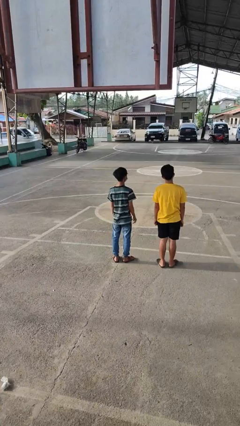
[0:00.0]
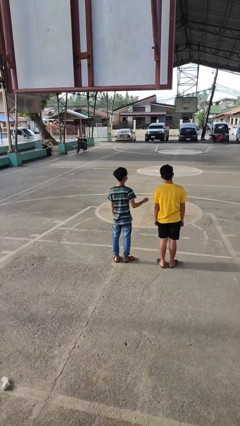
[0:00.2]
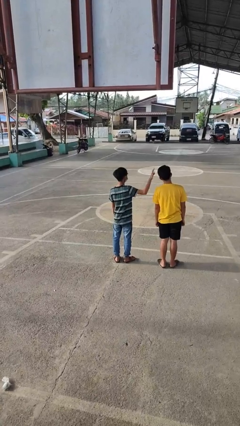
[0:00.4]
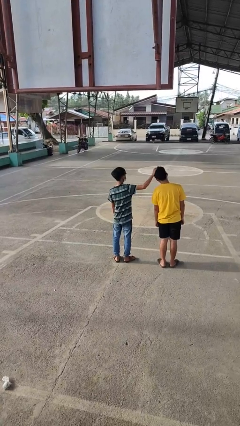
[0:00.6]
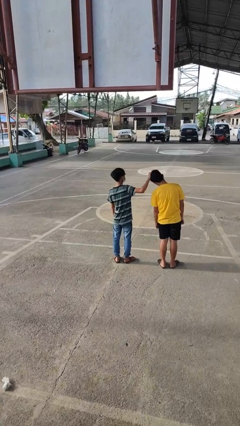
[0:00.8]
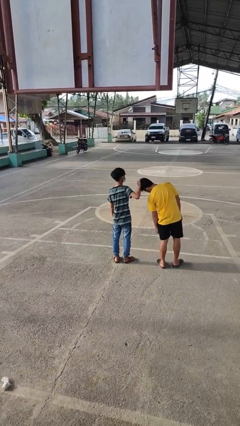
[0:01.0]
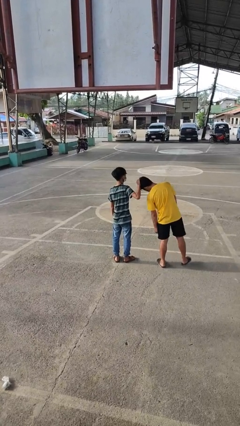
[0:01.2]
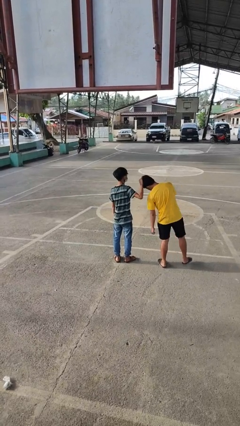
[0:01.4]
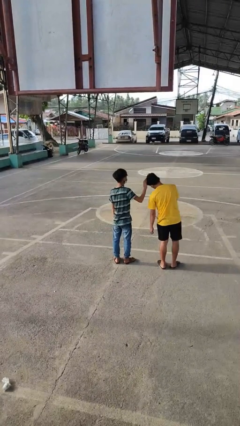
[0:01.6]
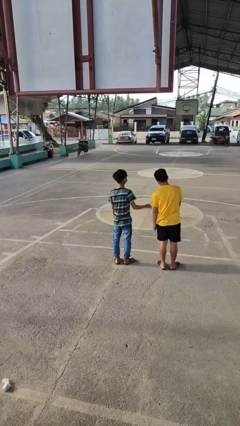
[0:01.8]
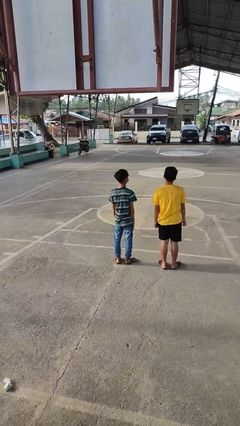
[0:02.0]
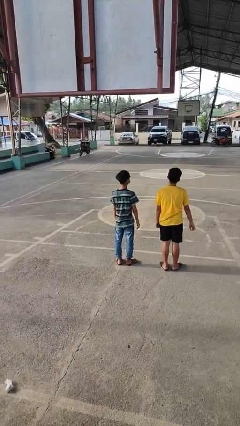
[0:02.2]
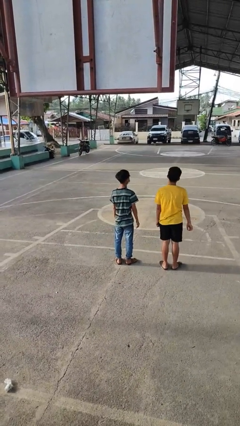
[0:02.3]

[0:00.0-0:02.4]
person grabs person by hair

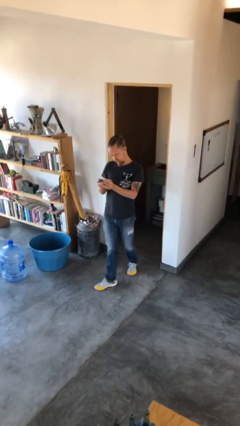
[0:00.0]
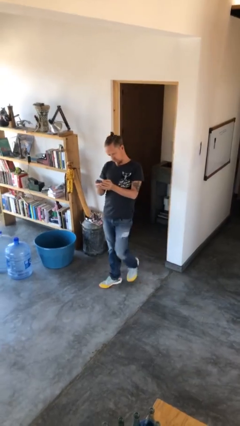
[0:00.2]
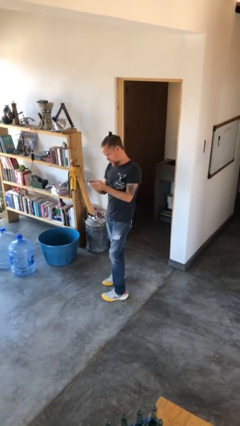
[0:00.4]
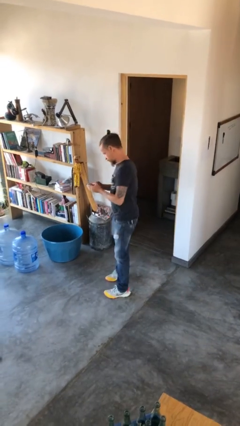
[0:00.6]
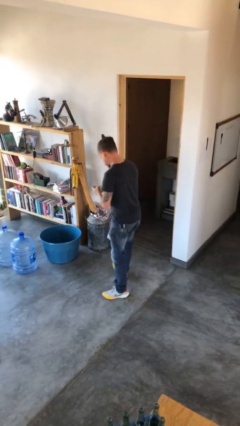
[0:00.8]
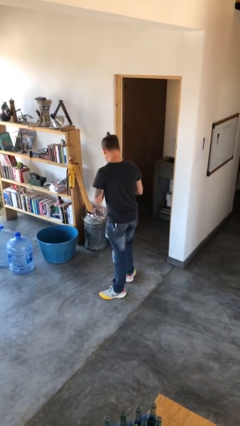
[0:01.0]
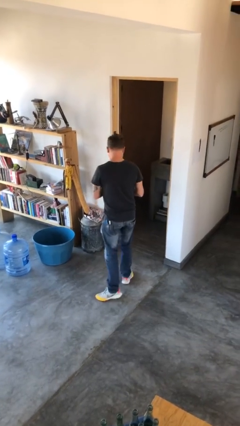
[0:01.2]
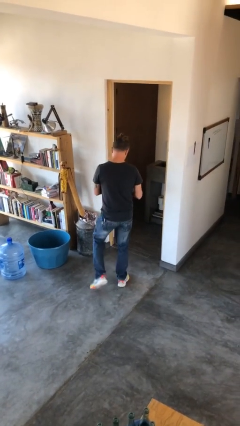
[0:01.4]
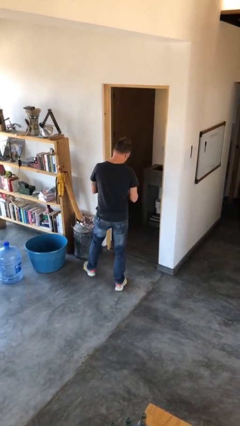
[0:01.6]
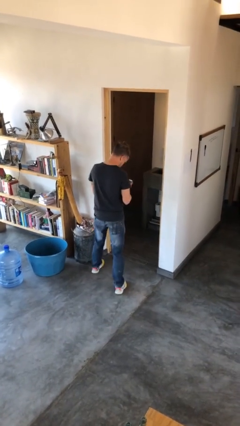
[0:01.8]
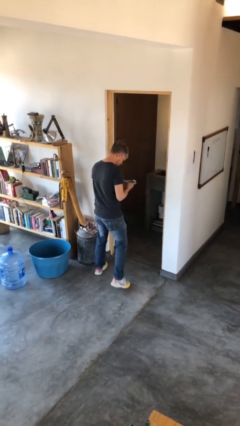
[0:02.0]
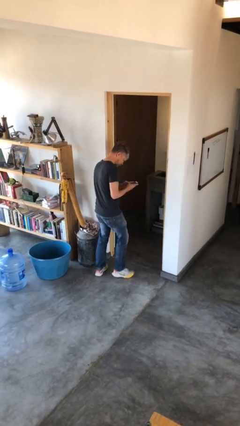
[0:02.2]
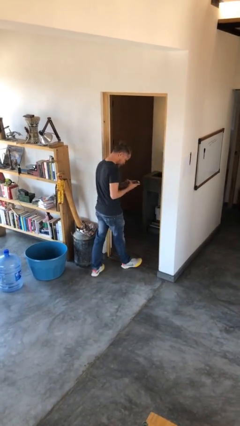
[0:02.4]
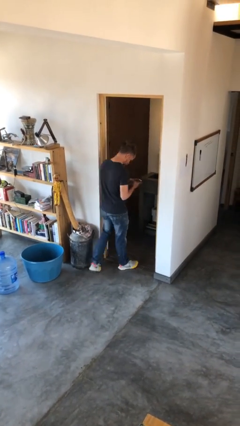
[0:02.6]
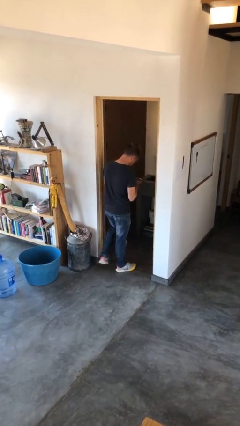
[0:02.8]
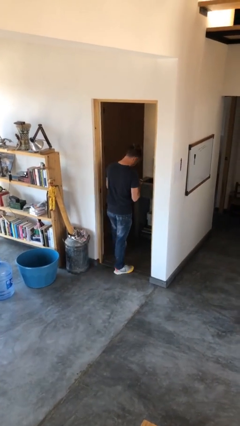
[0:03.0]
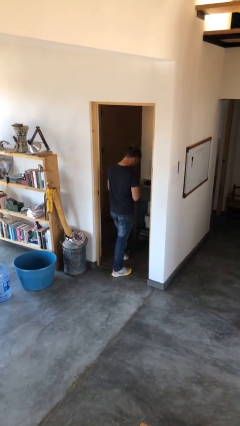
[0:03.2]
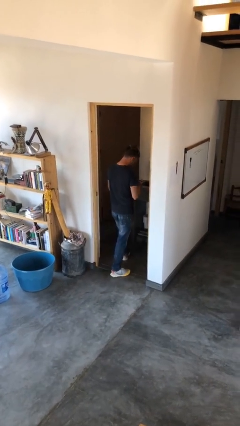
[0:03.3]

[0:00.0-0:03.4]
person exits scene through structure

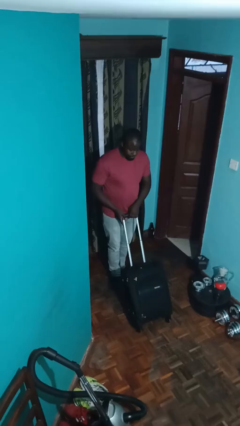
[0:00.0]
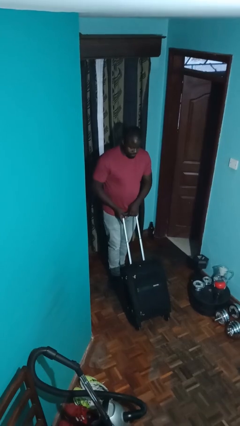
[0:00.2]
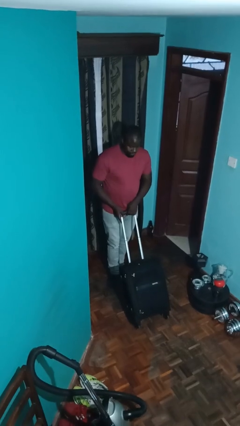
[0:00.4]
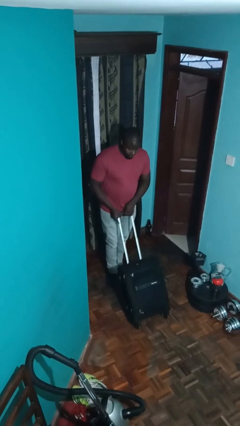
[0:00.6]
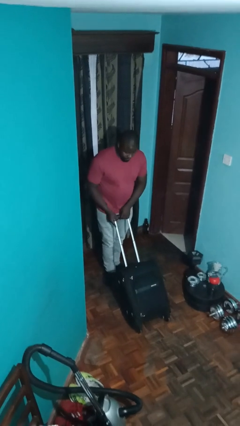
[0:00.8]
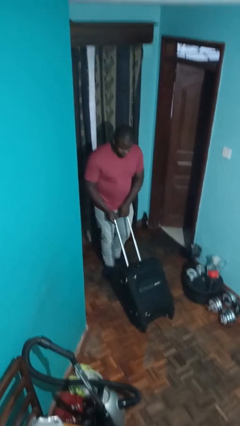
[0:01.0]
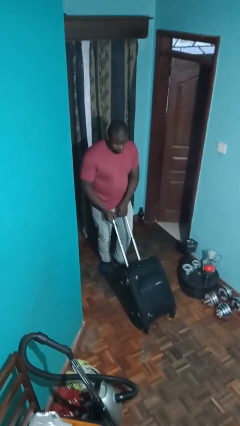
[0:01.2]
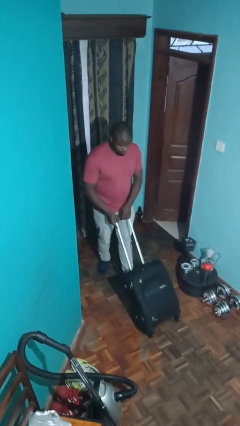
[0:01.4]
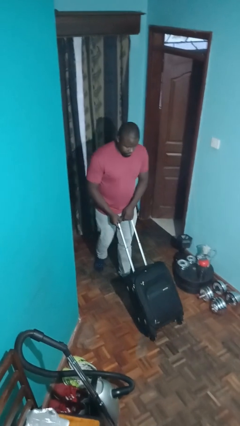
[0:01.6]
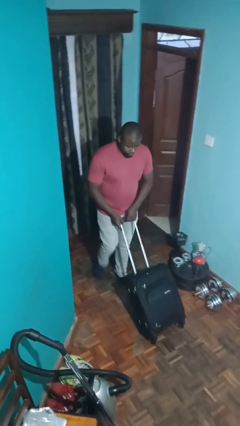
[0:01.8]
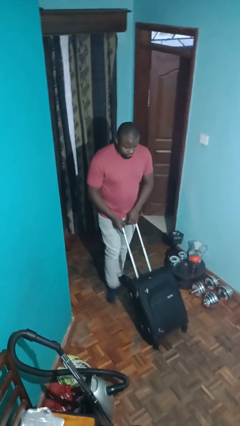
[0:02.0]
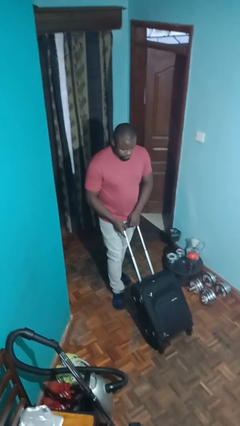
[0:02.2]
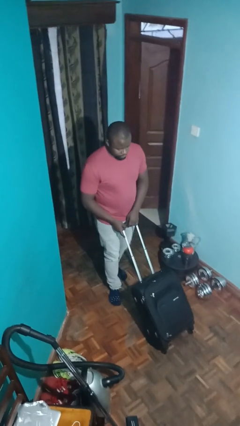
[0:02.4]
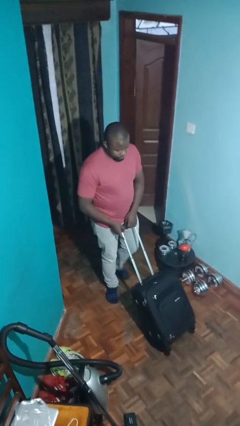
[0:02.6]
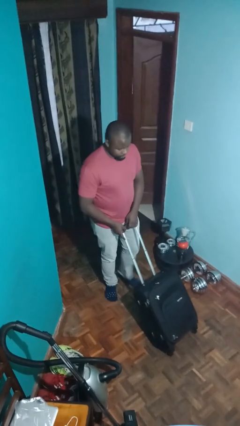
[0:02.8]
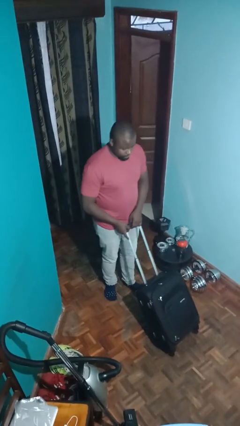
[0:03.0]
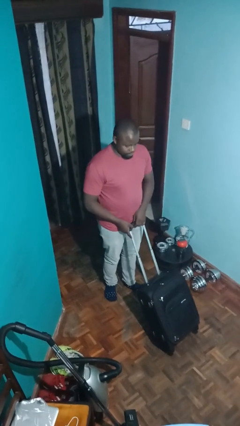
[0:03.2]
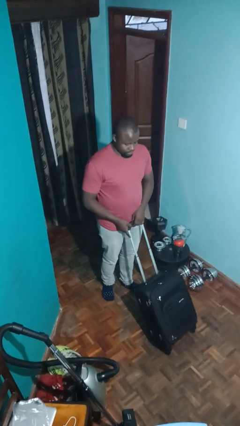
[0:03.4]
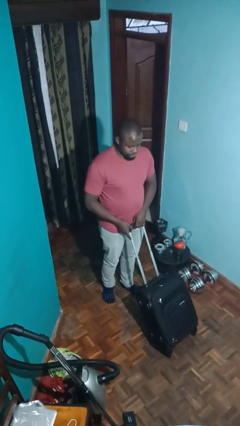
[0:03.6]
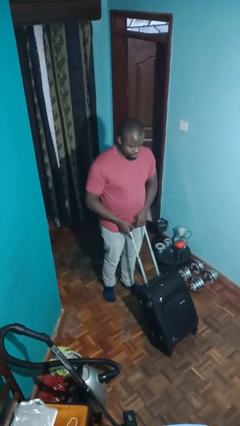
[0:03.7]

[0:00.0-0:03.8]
person pushes wheeled cart

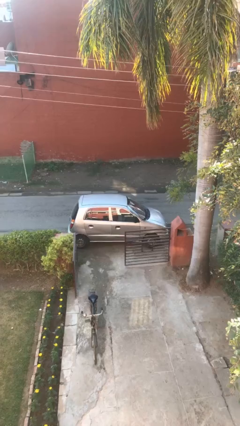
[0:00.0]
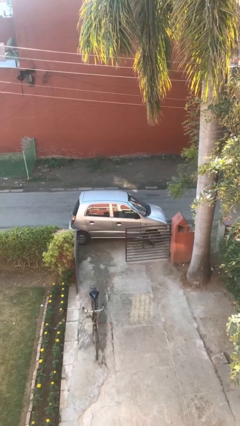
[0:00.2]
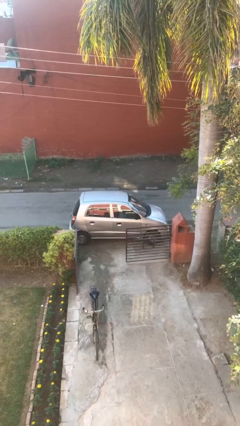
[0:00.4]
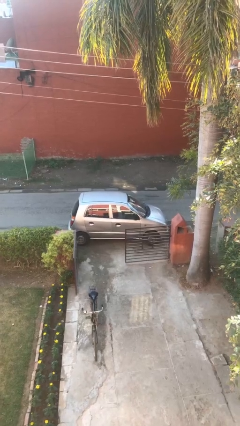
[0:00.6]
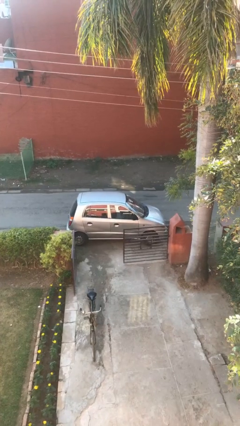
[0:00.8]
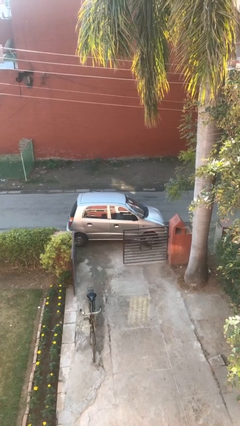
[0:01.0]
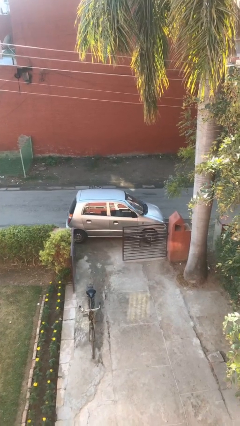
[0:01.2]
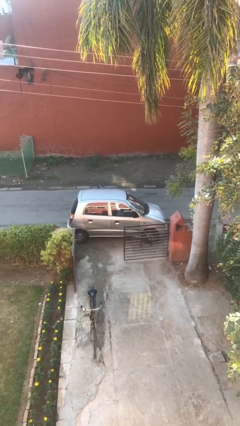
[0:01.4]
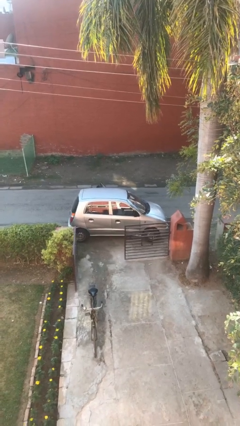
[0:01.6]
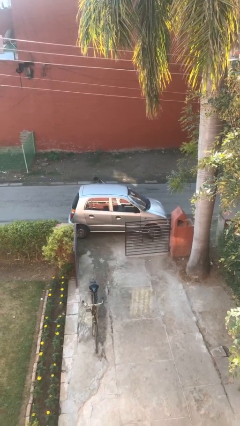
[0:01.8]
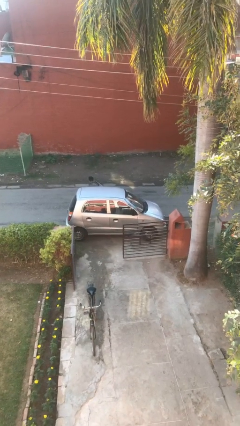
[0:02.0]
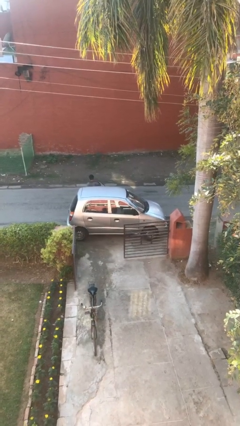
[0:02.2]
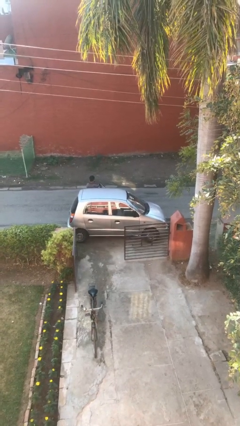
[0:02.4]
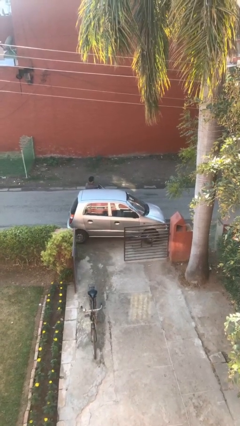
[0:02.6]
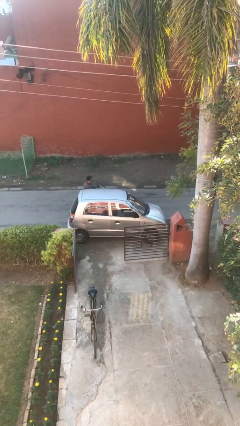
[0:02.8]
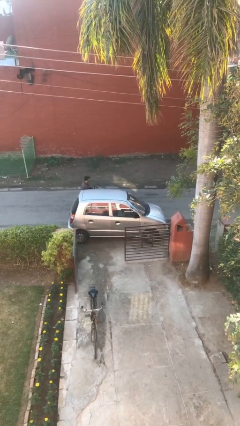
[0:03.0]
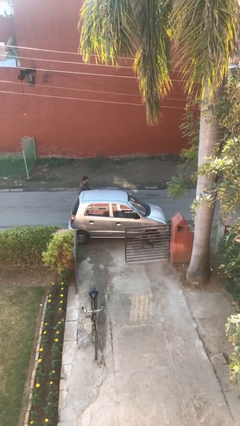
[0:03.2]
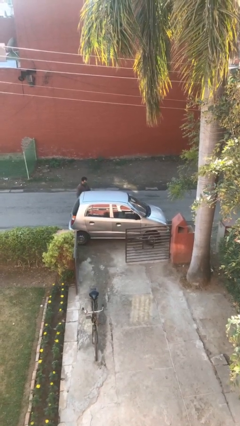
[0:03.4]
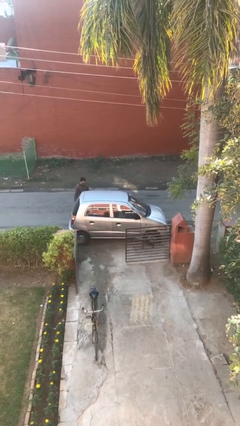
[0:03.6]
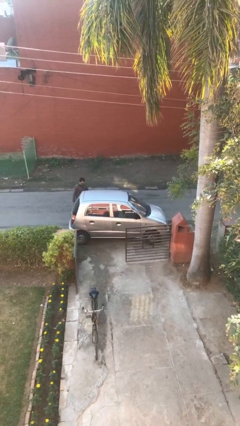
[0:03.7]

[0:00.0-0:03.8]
car drops off person

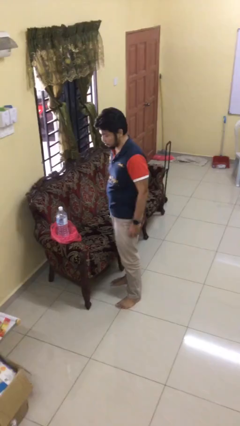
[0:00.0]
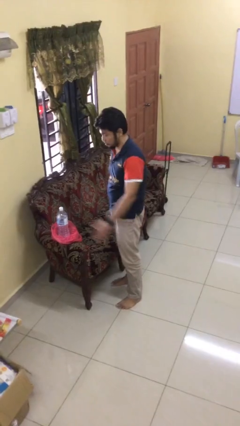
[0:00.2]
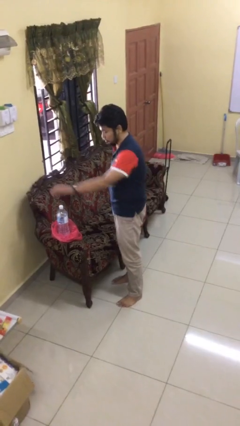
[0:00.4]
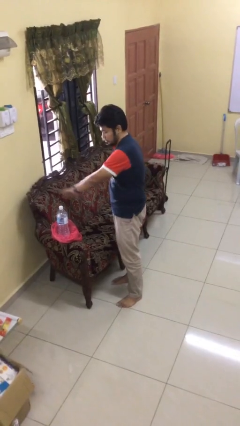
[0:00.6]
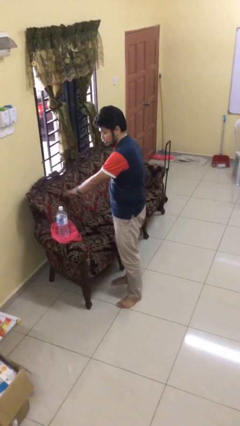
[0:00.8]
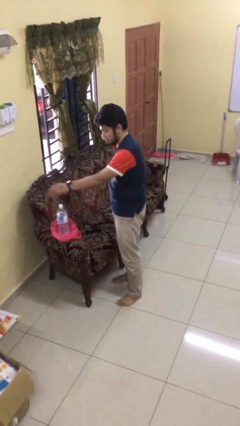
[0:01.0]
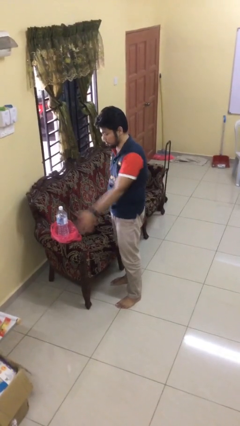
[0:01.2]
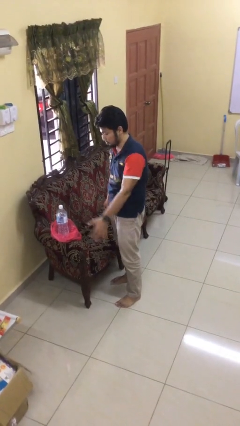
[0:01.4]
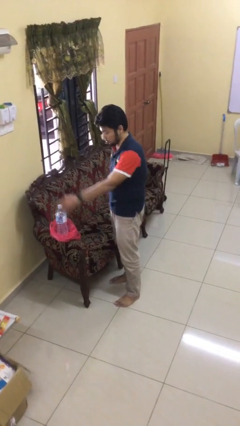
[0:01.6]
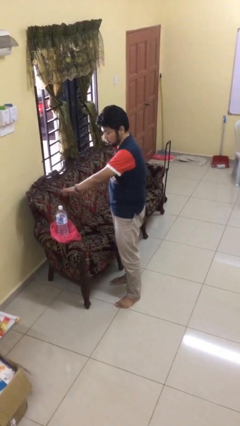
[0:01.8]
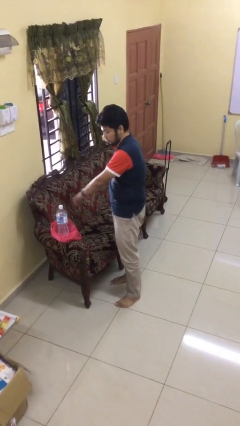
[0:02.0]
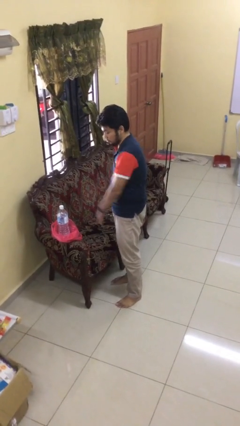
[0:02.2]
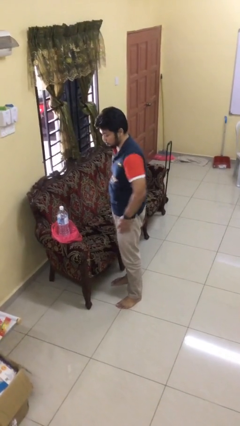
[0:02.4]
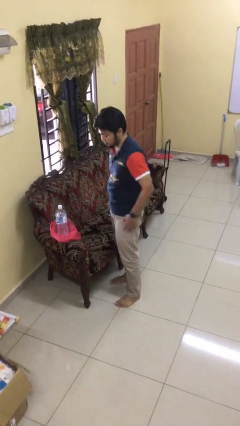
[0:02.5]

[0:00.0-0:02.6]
person waves hand over object

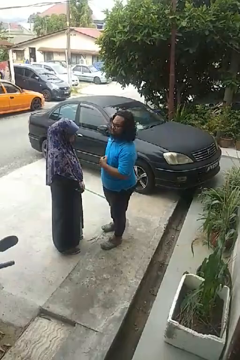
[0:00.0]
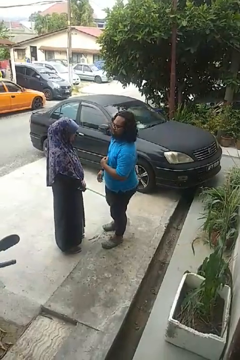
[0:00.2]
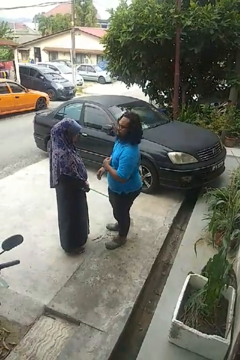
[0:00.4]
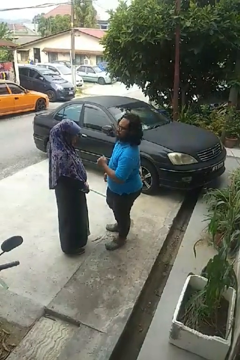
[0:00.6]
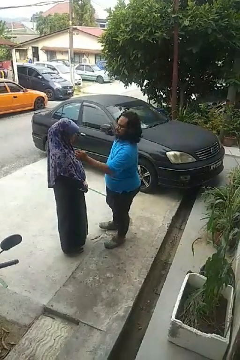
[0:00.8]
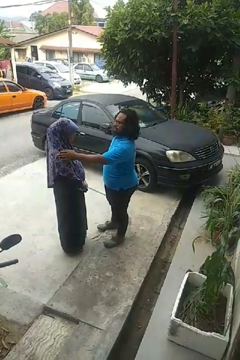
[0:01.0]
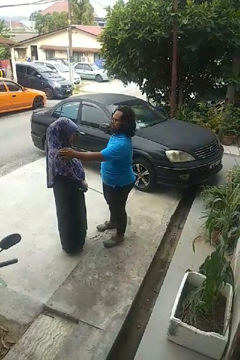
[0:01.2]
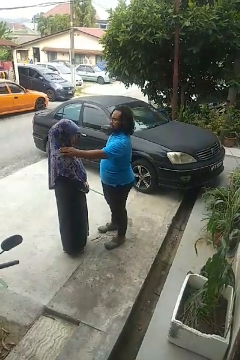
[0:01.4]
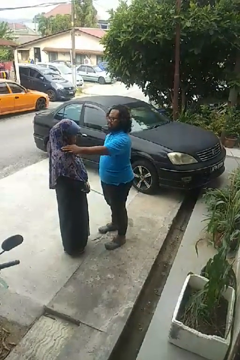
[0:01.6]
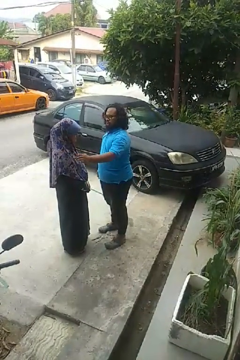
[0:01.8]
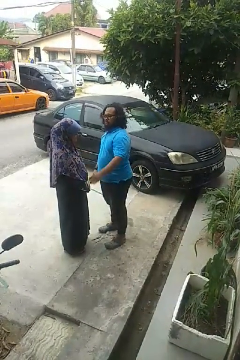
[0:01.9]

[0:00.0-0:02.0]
person pounds shoulders of person
